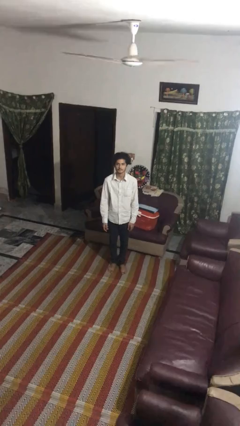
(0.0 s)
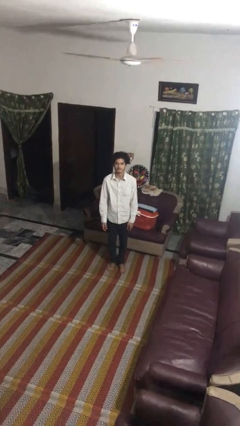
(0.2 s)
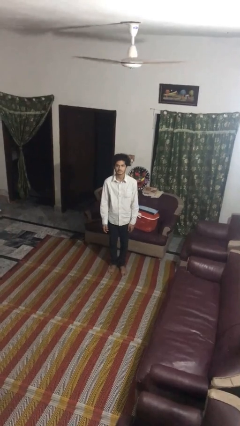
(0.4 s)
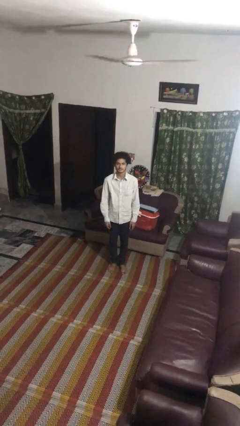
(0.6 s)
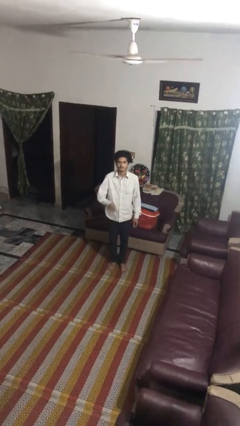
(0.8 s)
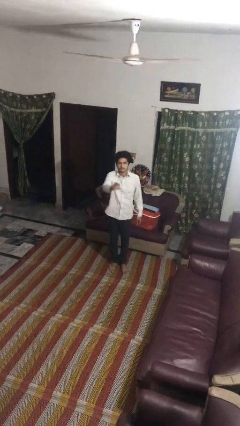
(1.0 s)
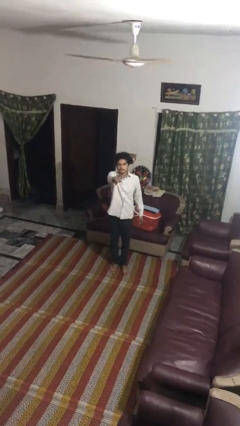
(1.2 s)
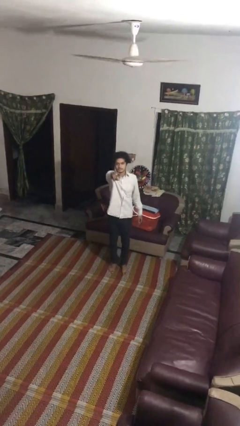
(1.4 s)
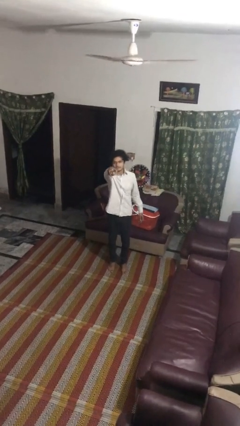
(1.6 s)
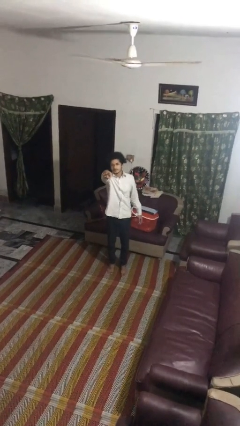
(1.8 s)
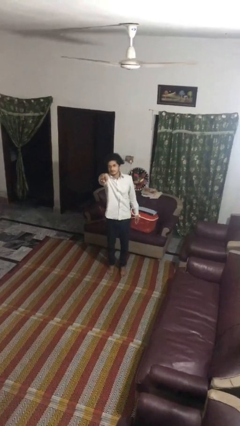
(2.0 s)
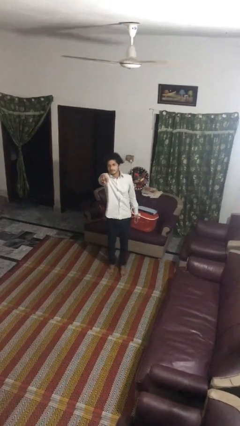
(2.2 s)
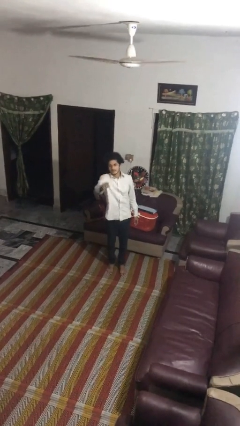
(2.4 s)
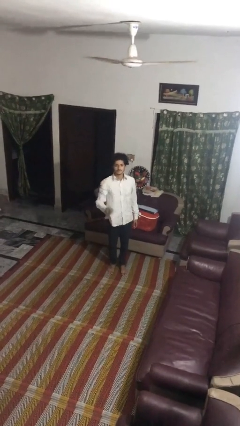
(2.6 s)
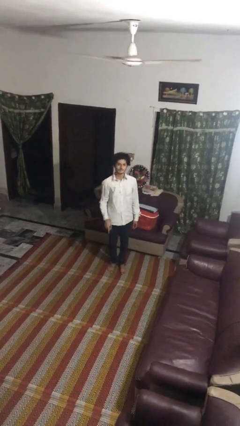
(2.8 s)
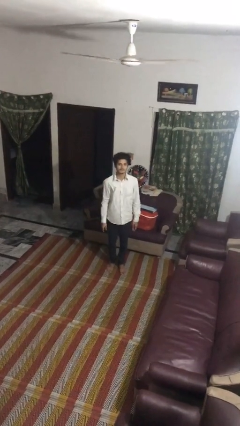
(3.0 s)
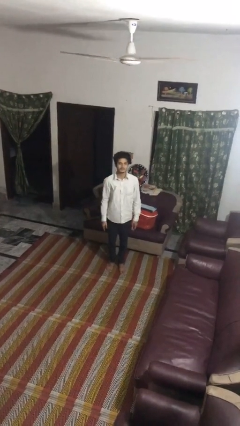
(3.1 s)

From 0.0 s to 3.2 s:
person points at person

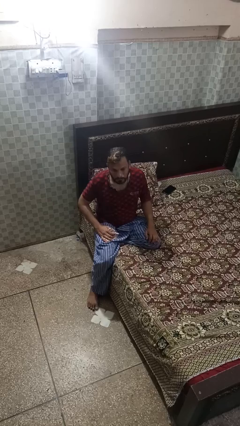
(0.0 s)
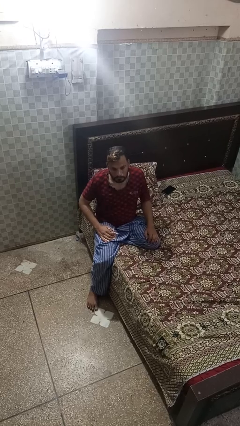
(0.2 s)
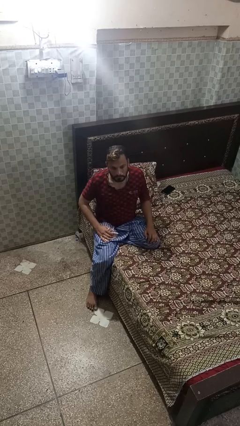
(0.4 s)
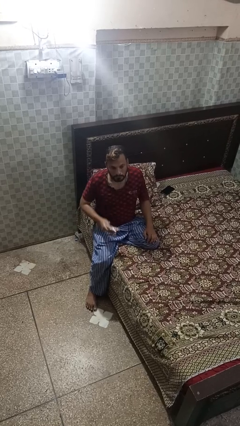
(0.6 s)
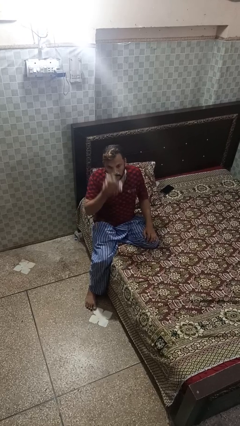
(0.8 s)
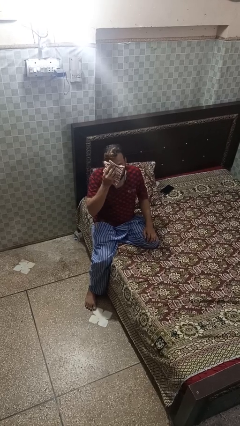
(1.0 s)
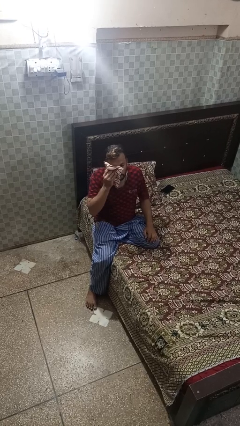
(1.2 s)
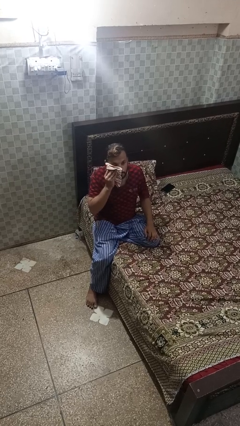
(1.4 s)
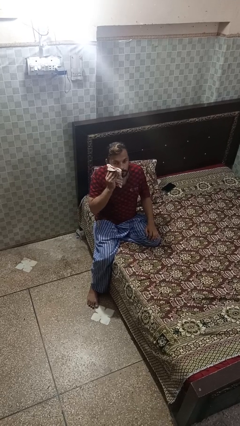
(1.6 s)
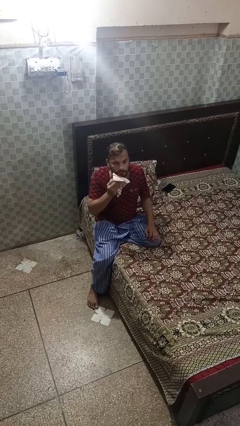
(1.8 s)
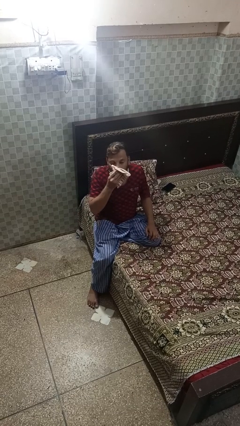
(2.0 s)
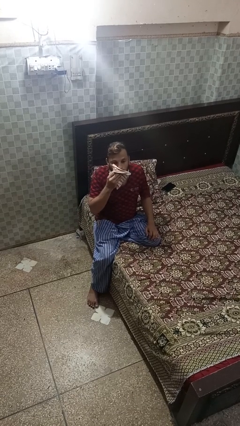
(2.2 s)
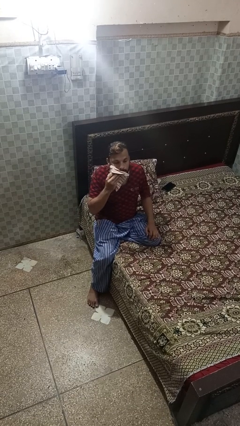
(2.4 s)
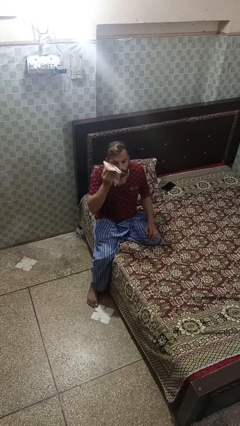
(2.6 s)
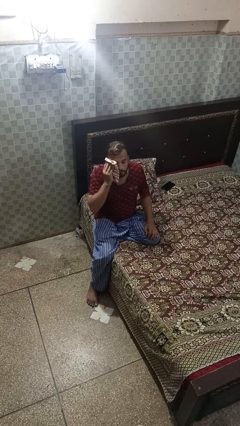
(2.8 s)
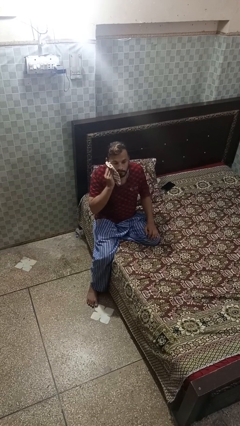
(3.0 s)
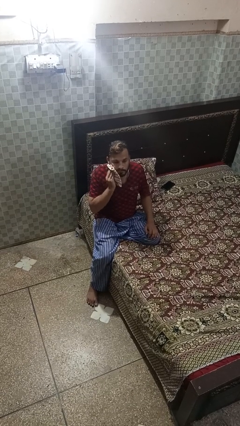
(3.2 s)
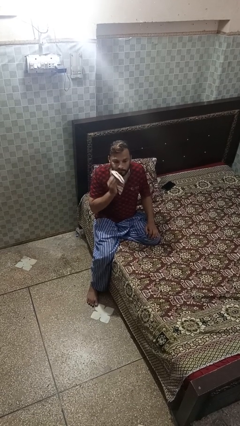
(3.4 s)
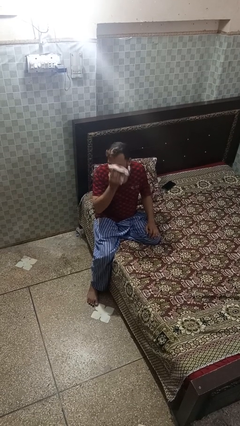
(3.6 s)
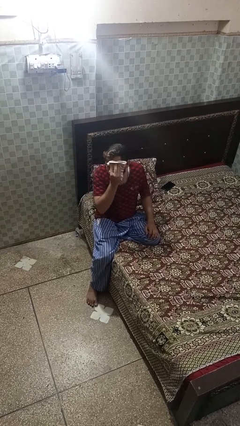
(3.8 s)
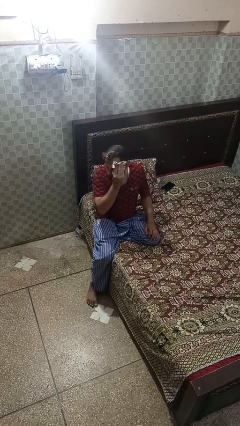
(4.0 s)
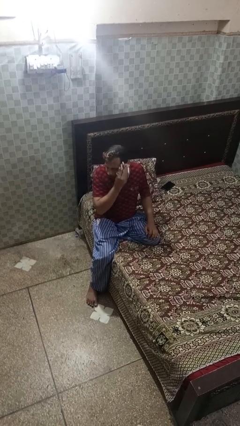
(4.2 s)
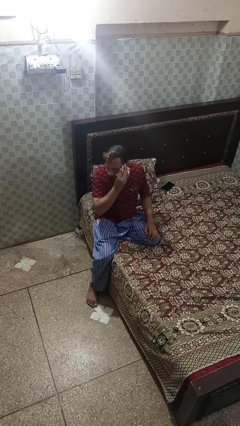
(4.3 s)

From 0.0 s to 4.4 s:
person wipes mouth with napkin

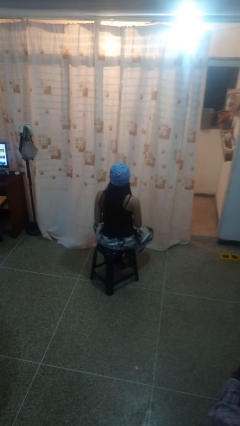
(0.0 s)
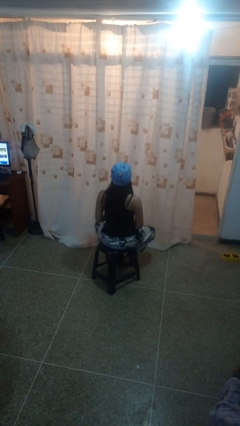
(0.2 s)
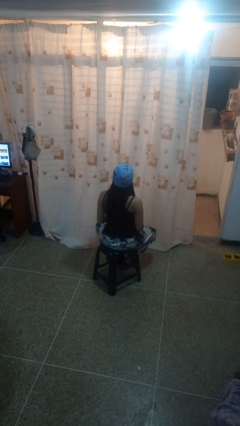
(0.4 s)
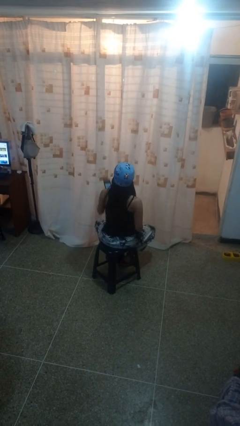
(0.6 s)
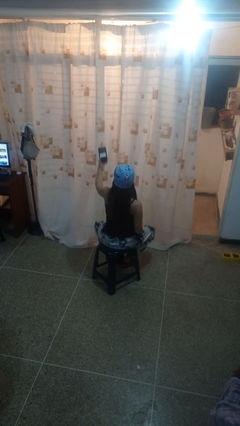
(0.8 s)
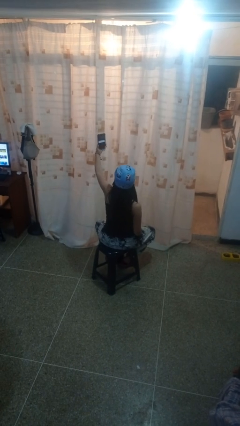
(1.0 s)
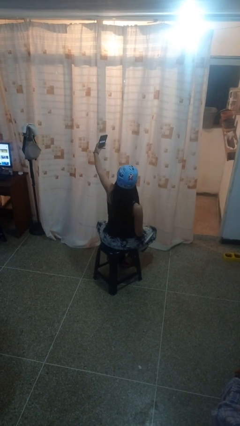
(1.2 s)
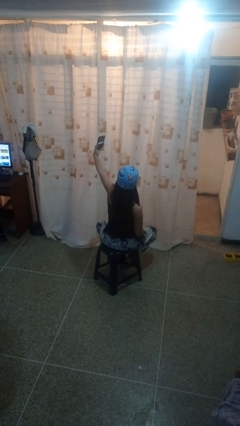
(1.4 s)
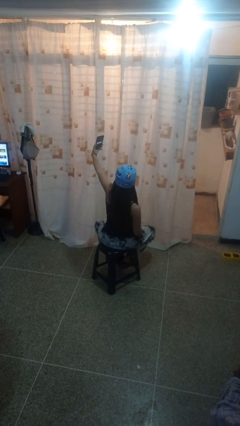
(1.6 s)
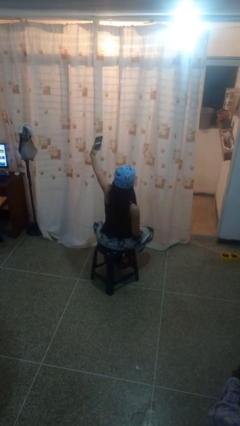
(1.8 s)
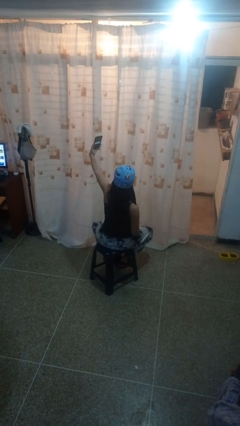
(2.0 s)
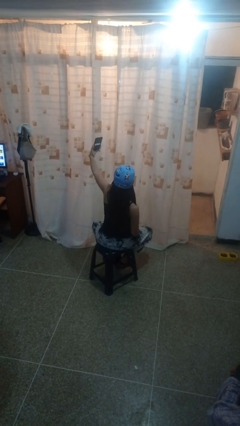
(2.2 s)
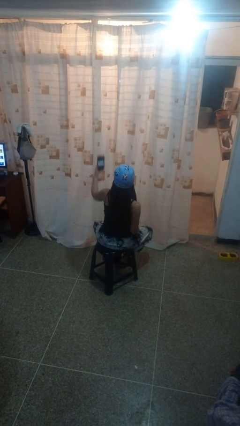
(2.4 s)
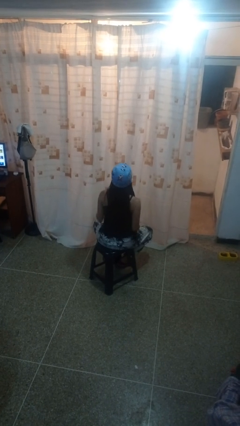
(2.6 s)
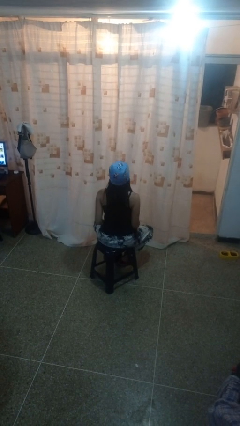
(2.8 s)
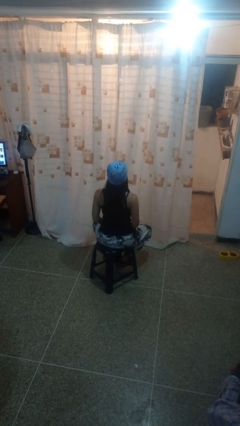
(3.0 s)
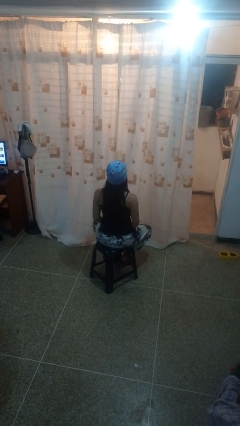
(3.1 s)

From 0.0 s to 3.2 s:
person takes selfie

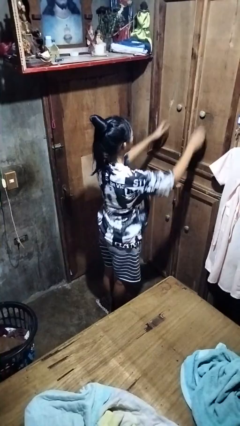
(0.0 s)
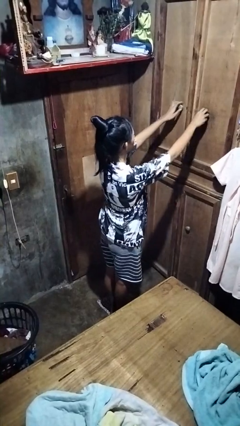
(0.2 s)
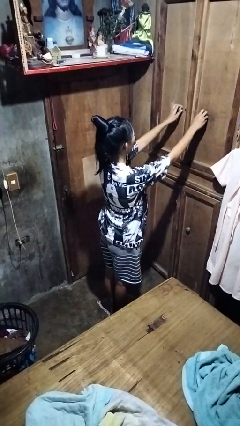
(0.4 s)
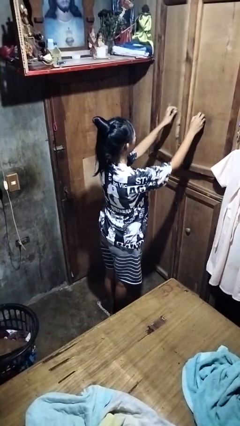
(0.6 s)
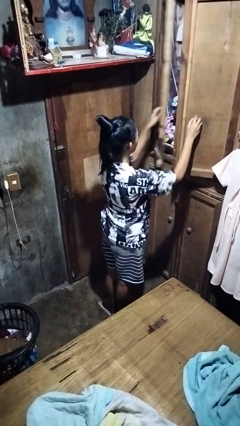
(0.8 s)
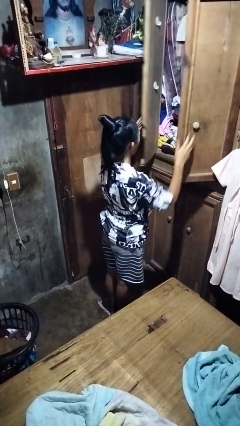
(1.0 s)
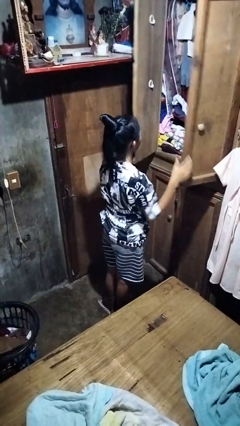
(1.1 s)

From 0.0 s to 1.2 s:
person opens closet door

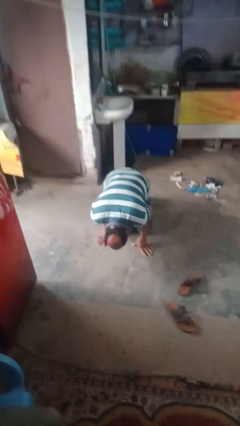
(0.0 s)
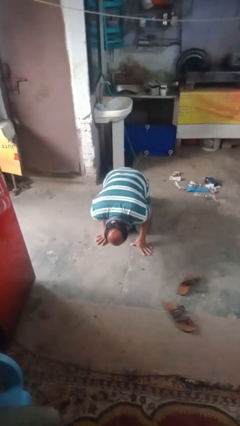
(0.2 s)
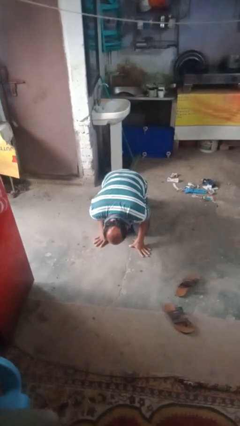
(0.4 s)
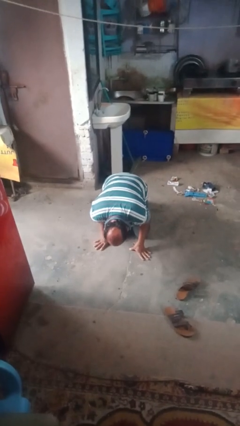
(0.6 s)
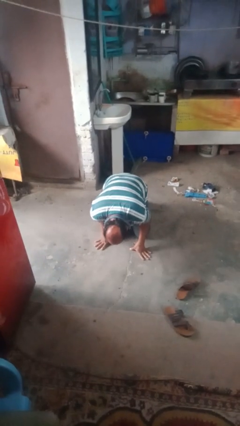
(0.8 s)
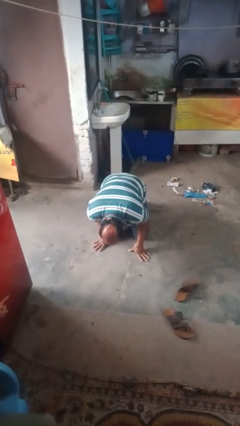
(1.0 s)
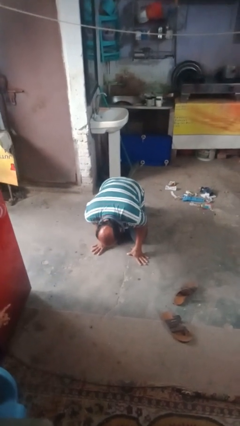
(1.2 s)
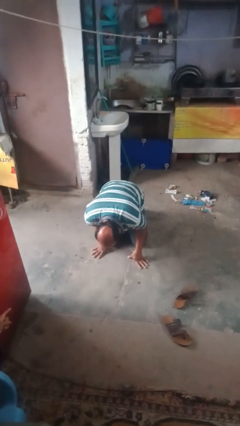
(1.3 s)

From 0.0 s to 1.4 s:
person lies down on floor

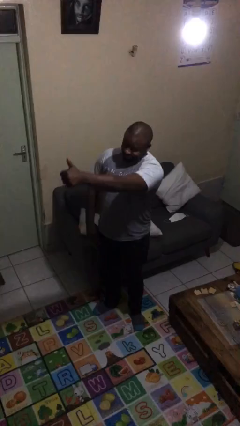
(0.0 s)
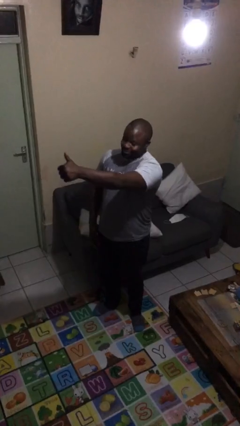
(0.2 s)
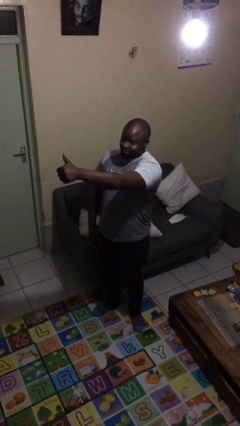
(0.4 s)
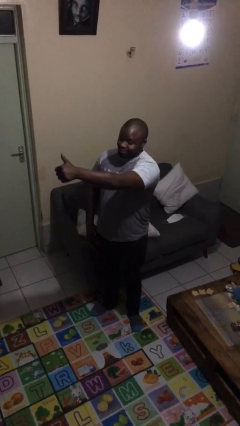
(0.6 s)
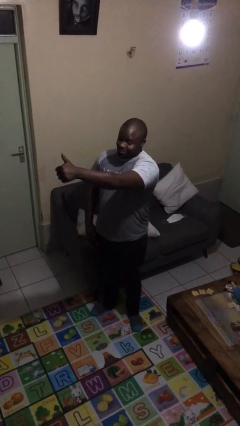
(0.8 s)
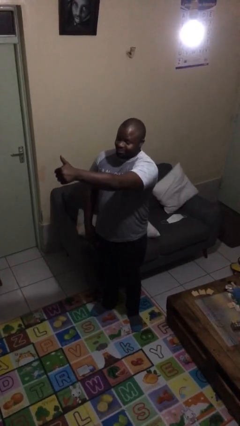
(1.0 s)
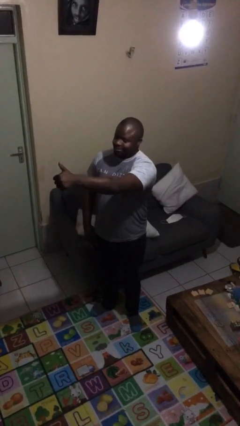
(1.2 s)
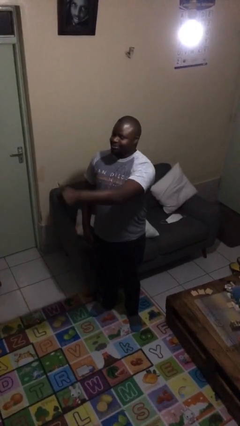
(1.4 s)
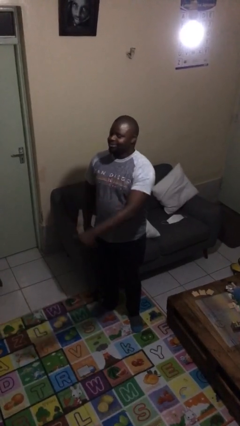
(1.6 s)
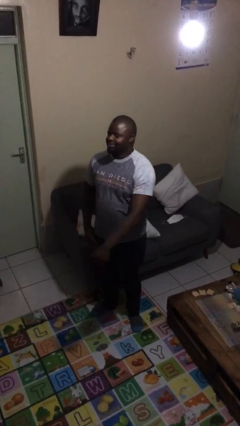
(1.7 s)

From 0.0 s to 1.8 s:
person gestures thumbs up

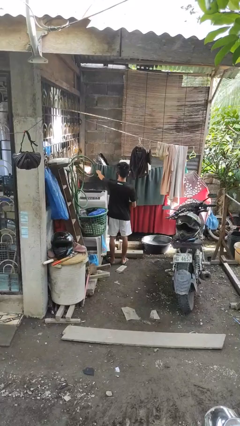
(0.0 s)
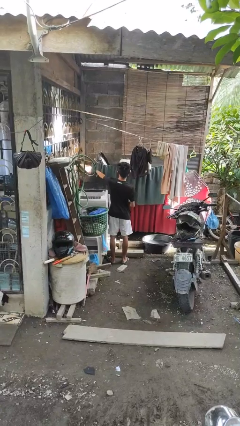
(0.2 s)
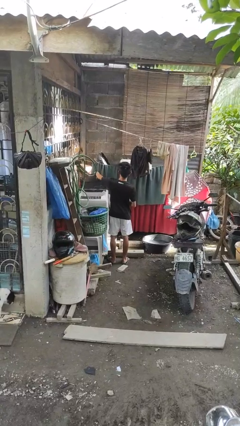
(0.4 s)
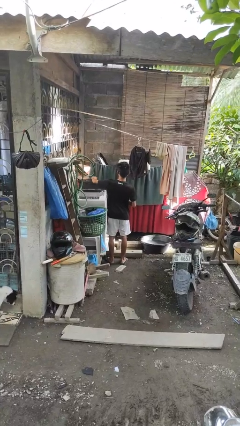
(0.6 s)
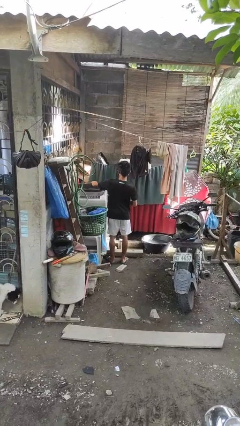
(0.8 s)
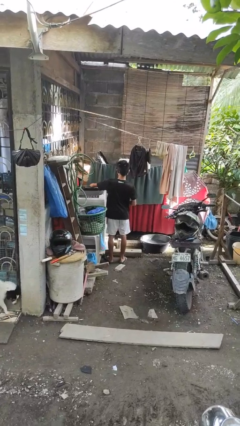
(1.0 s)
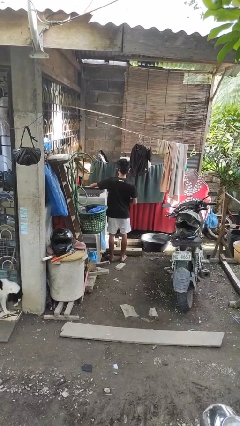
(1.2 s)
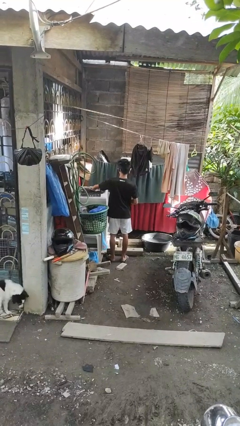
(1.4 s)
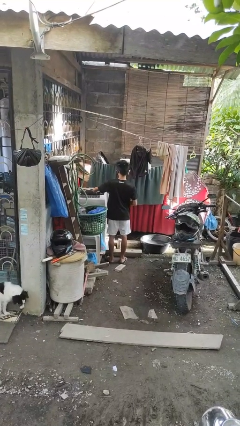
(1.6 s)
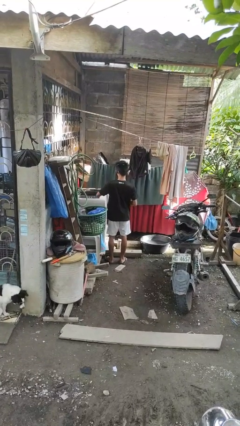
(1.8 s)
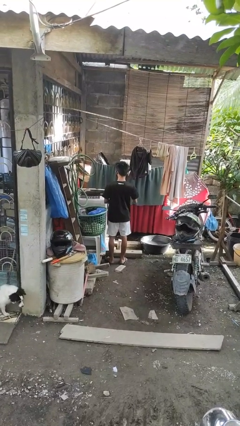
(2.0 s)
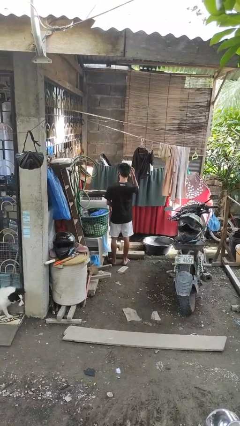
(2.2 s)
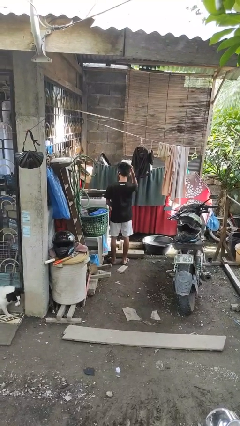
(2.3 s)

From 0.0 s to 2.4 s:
person closes clothes washer
